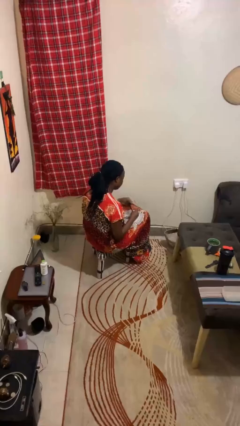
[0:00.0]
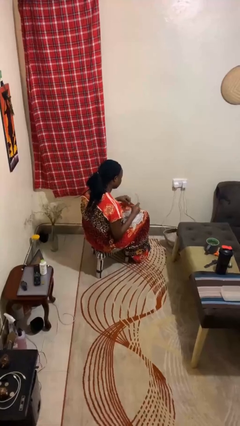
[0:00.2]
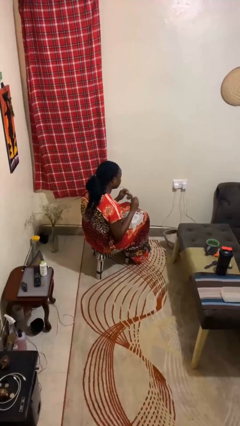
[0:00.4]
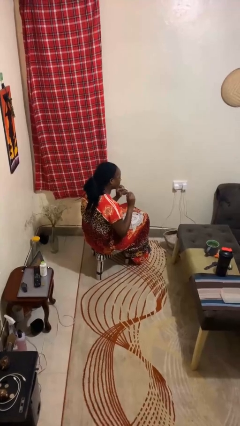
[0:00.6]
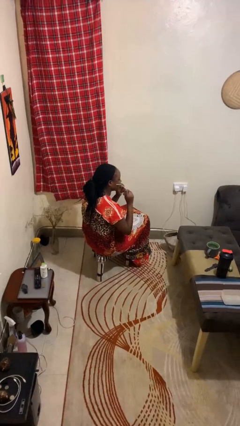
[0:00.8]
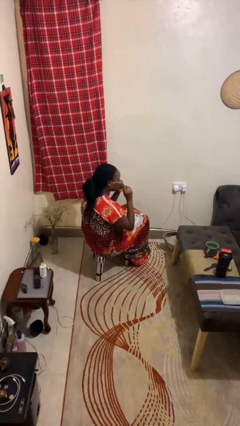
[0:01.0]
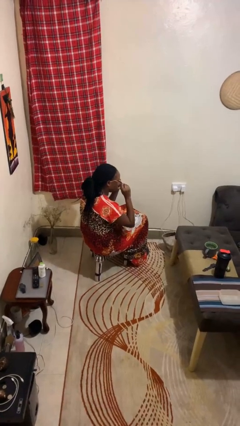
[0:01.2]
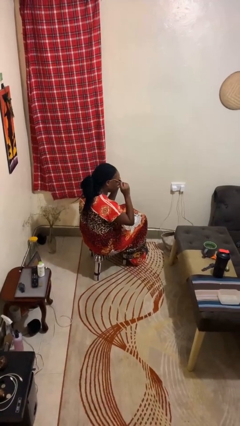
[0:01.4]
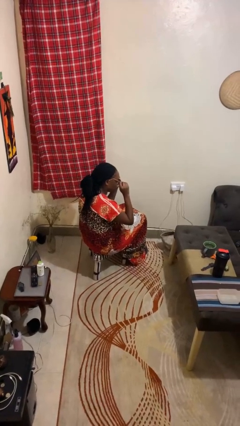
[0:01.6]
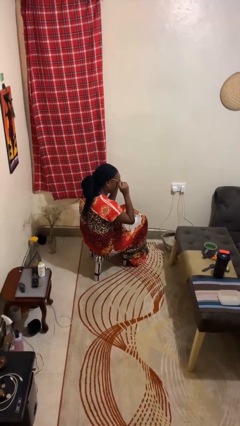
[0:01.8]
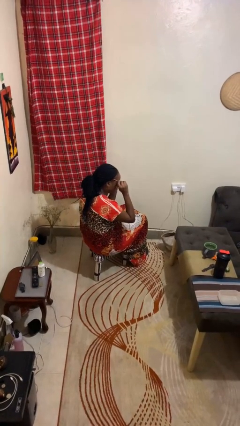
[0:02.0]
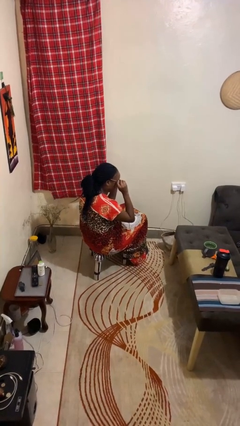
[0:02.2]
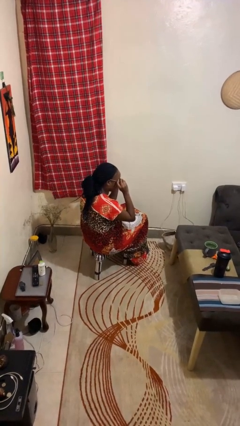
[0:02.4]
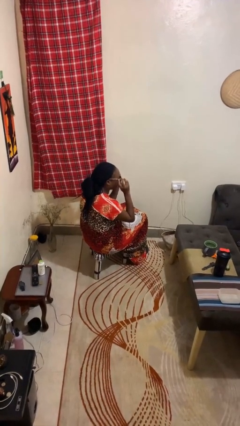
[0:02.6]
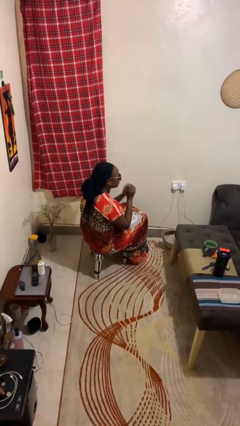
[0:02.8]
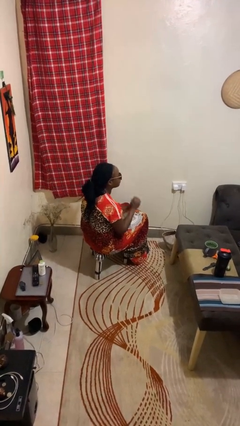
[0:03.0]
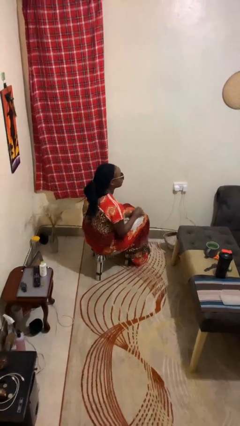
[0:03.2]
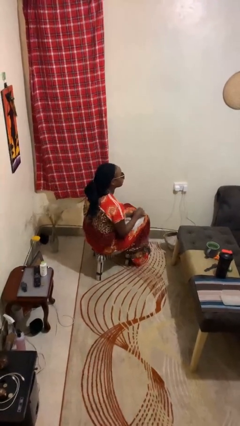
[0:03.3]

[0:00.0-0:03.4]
person puts on sunglasses

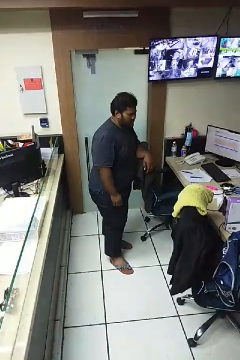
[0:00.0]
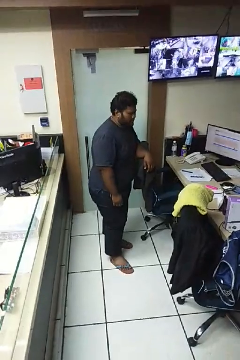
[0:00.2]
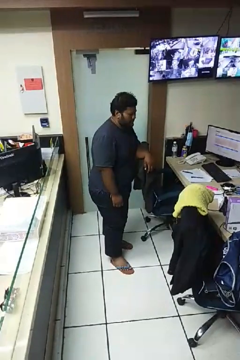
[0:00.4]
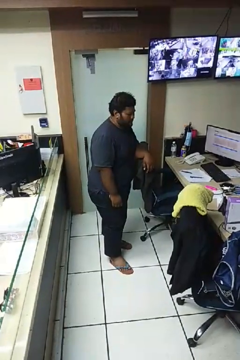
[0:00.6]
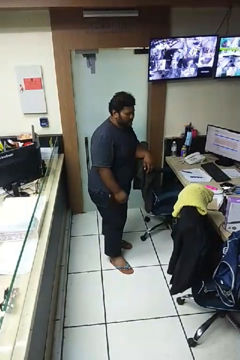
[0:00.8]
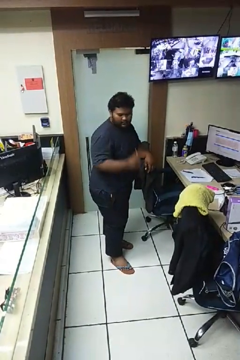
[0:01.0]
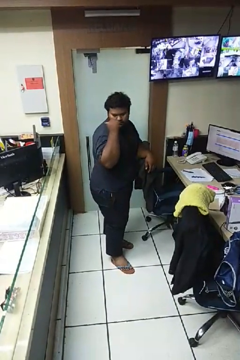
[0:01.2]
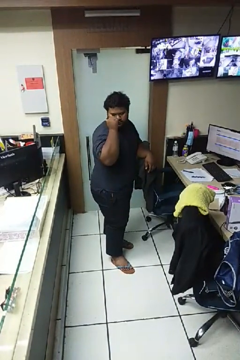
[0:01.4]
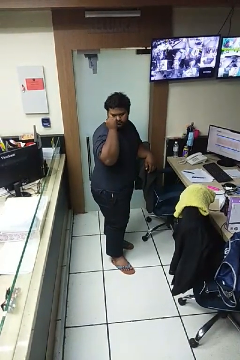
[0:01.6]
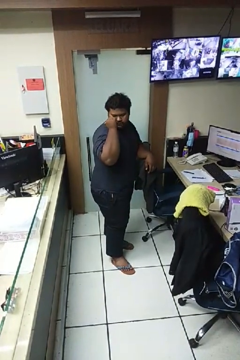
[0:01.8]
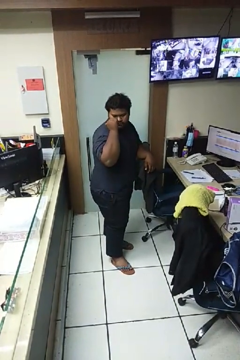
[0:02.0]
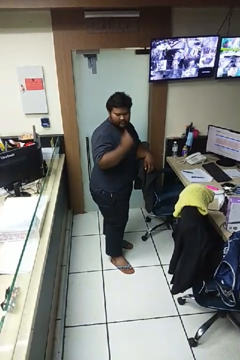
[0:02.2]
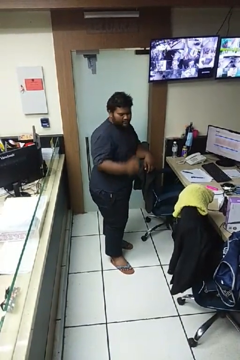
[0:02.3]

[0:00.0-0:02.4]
person gestures behind me

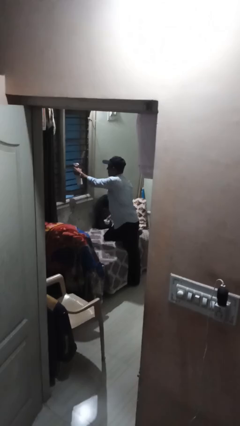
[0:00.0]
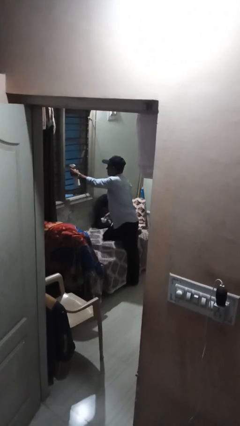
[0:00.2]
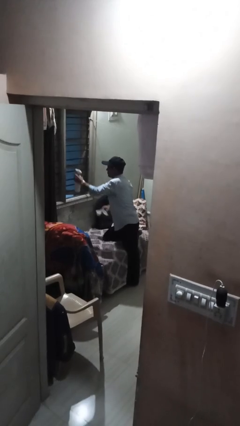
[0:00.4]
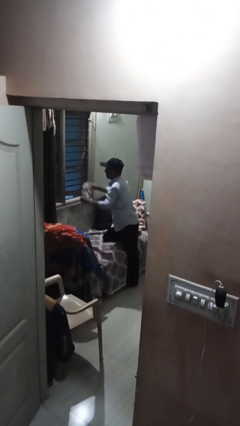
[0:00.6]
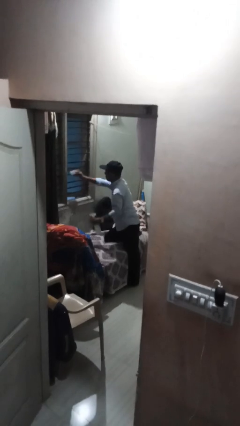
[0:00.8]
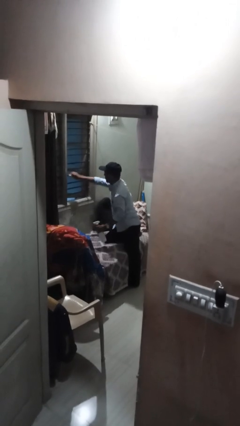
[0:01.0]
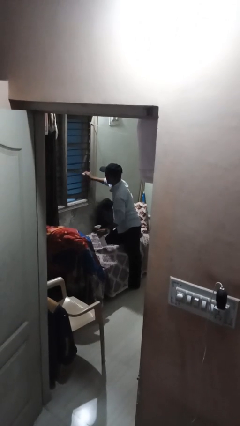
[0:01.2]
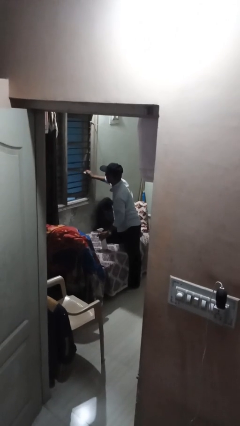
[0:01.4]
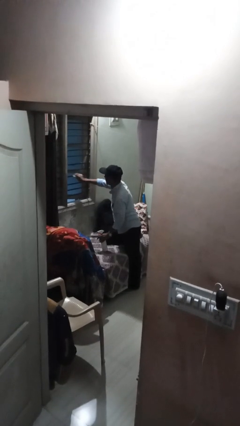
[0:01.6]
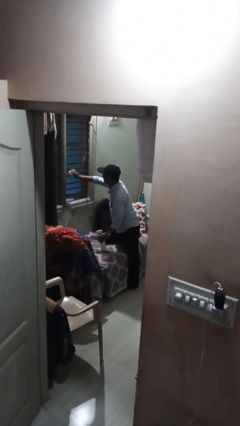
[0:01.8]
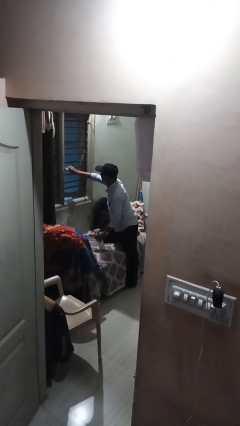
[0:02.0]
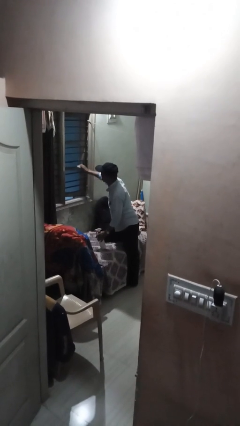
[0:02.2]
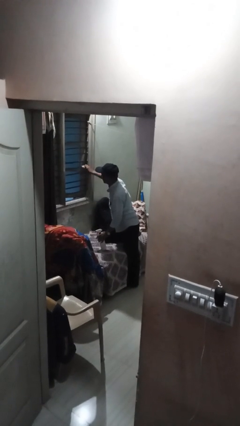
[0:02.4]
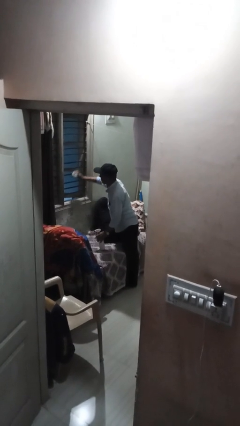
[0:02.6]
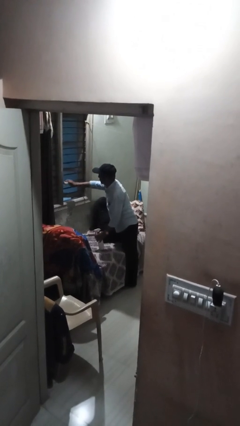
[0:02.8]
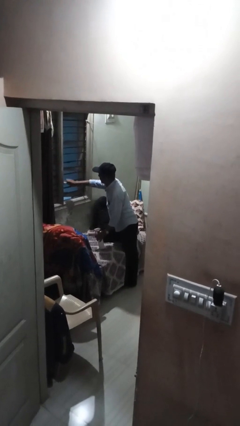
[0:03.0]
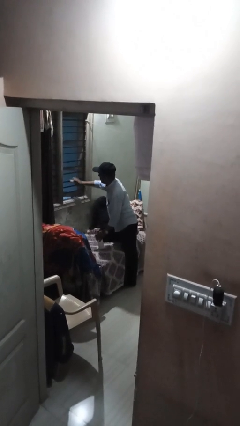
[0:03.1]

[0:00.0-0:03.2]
person washes window

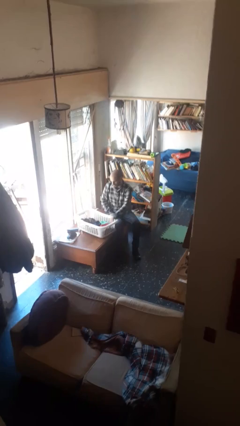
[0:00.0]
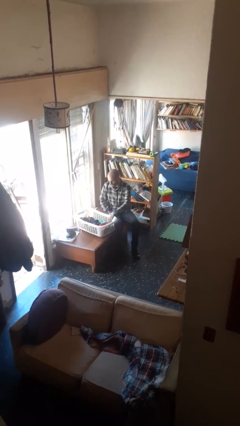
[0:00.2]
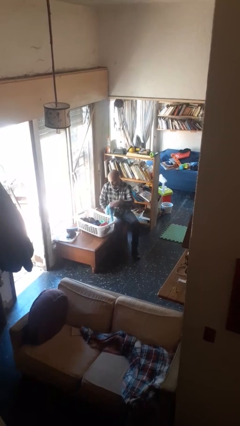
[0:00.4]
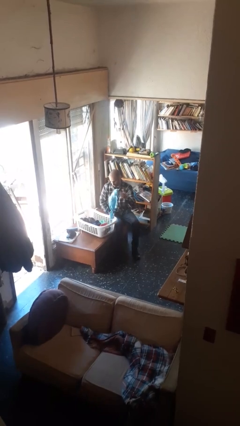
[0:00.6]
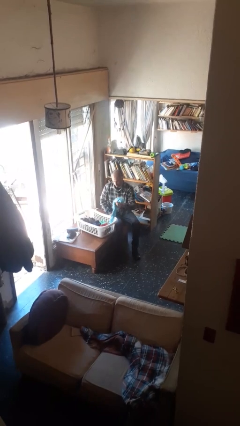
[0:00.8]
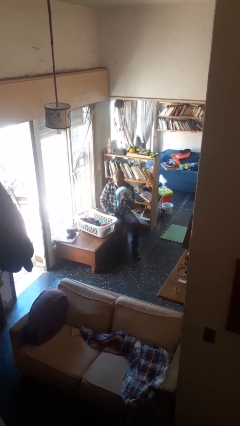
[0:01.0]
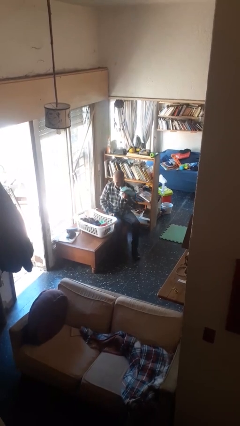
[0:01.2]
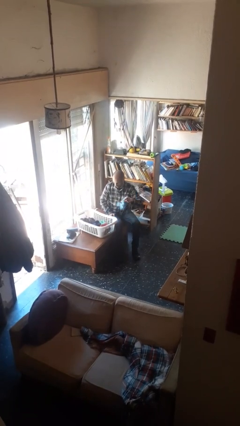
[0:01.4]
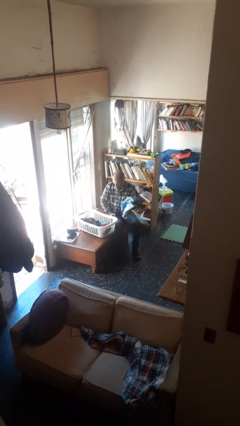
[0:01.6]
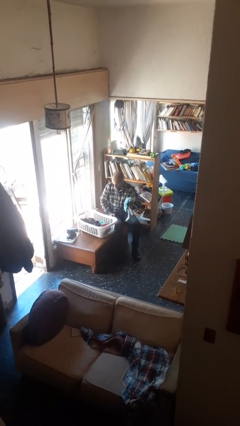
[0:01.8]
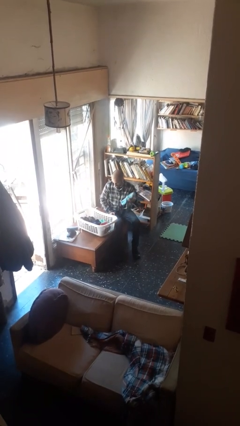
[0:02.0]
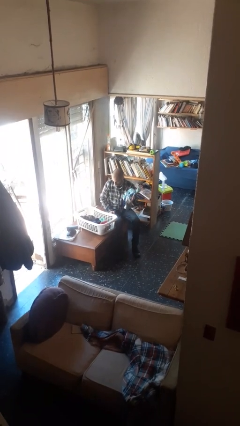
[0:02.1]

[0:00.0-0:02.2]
person takes object from basket

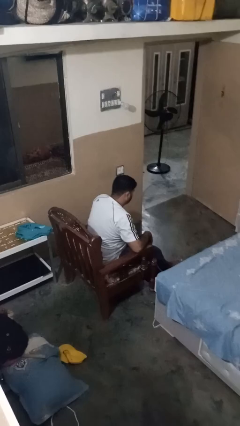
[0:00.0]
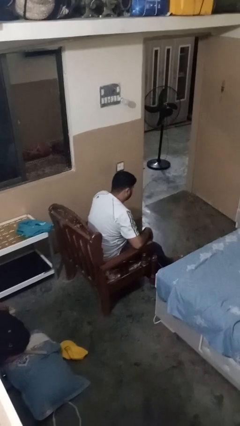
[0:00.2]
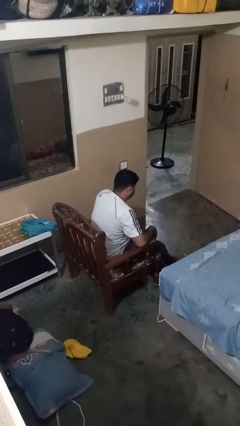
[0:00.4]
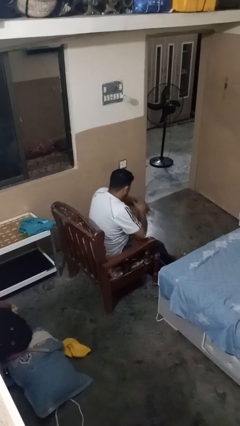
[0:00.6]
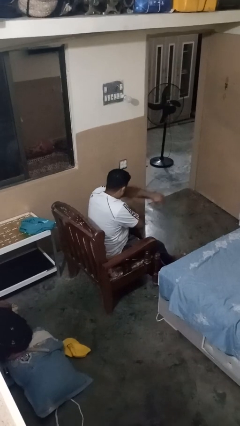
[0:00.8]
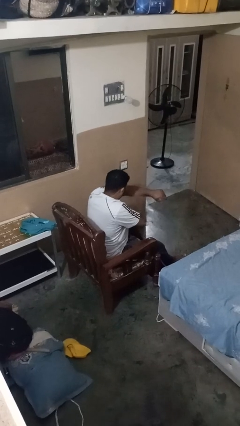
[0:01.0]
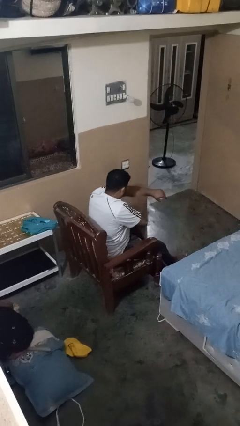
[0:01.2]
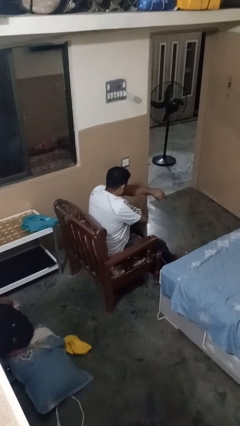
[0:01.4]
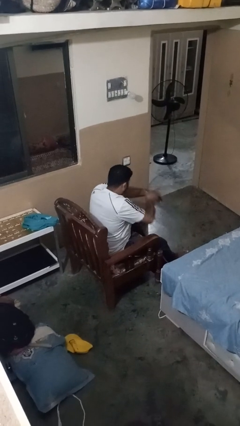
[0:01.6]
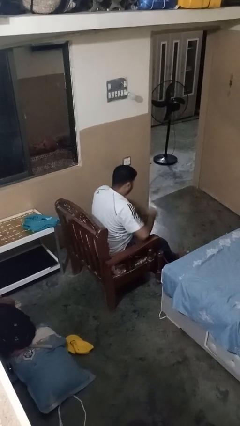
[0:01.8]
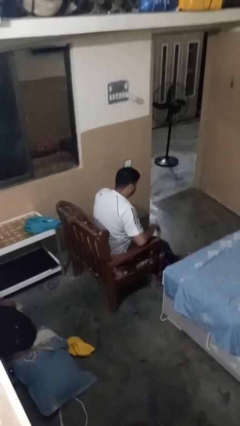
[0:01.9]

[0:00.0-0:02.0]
person swats bug

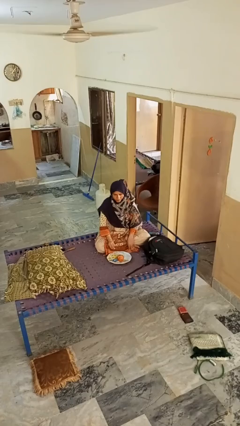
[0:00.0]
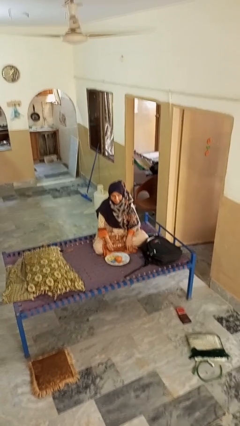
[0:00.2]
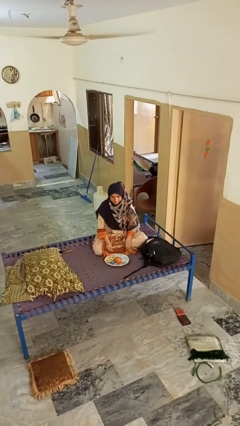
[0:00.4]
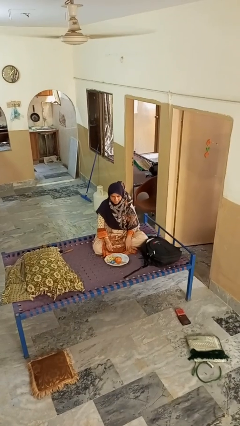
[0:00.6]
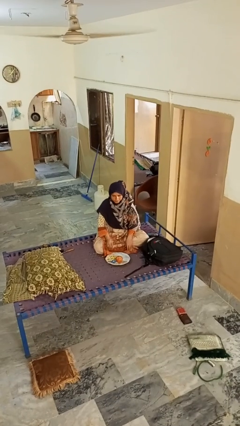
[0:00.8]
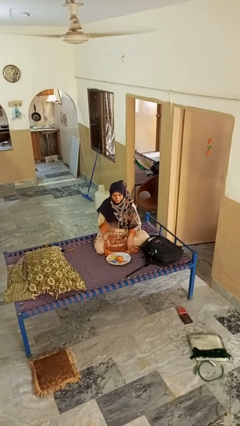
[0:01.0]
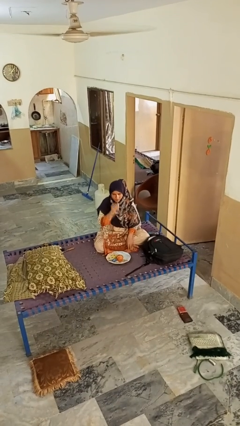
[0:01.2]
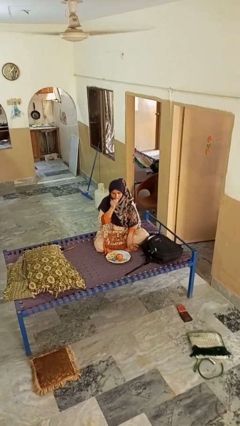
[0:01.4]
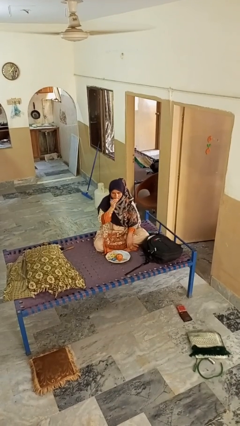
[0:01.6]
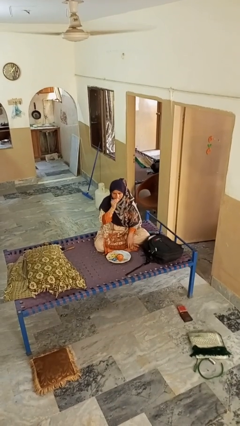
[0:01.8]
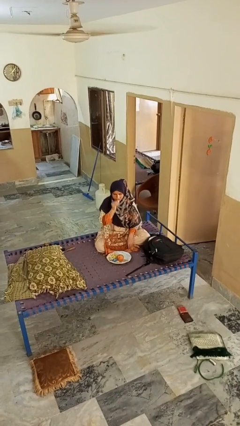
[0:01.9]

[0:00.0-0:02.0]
person eats apple

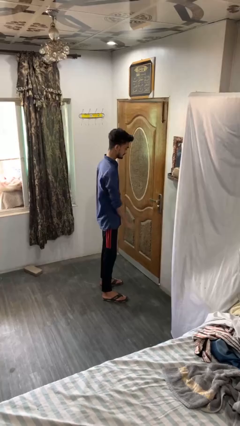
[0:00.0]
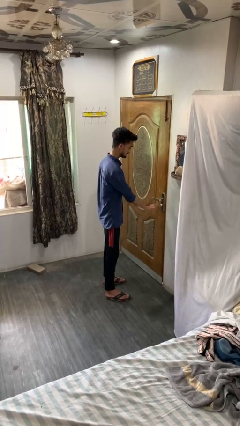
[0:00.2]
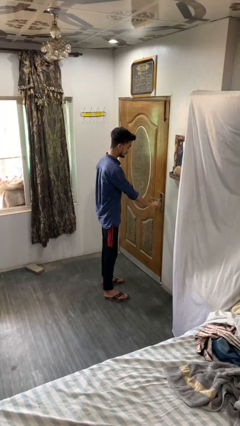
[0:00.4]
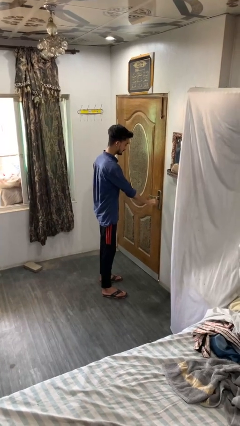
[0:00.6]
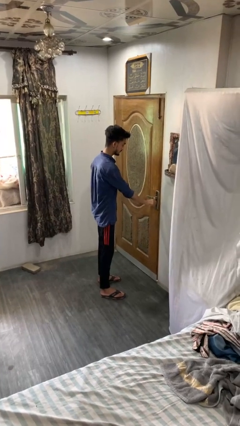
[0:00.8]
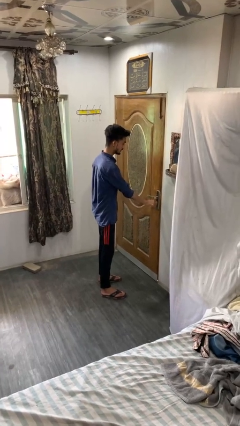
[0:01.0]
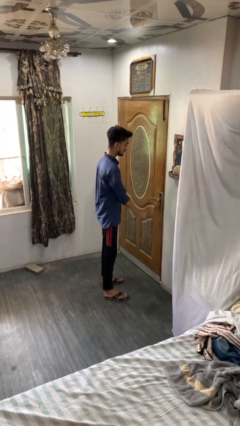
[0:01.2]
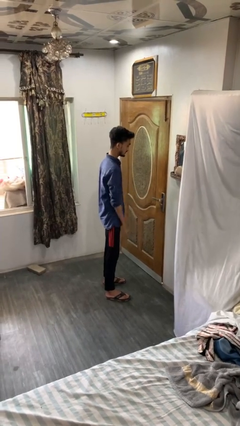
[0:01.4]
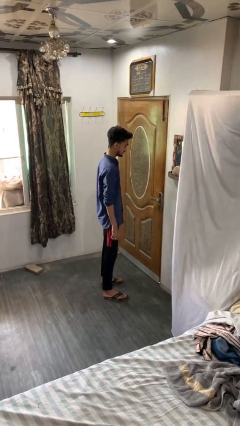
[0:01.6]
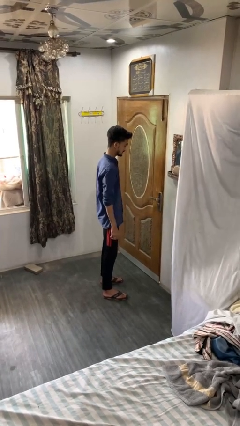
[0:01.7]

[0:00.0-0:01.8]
person locks door with keys

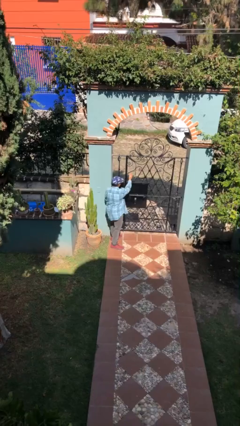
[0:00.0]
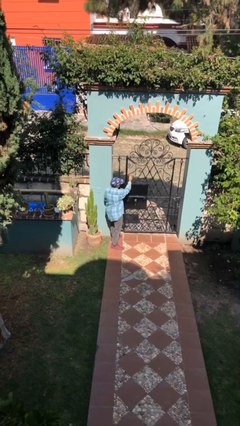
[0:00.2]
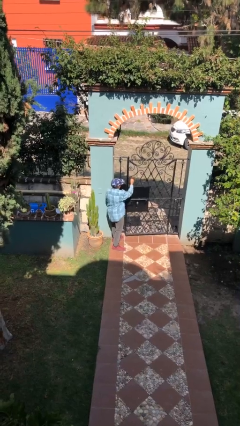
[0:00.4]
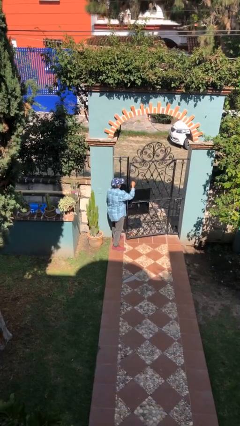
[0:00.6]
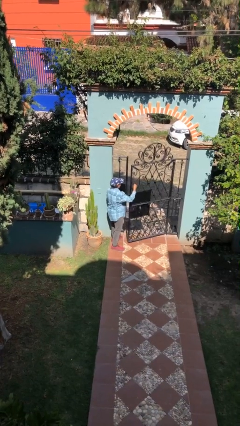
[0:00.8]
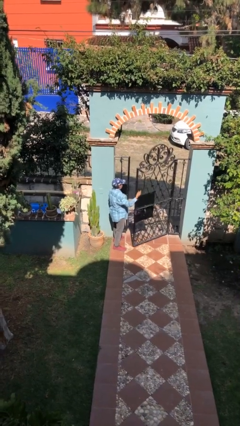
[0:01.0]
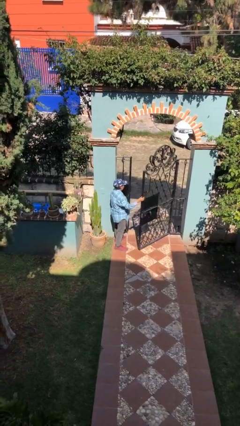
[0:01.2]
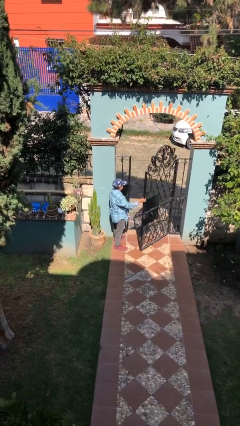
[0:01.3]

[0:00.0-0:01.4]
person opens facility door
